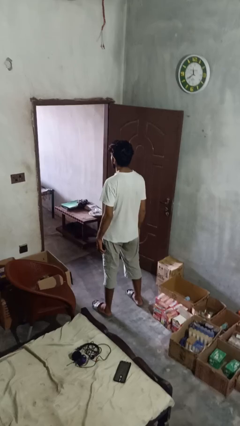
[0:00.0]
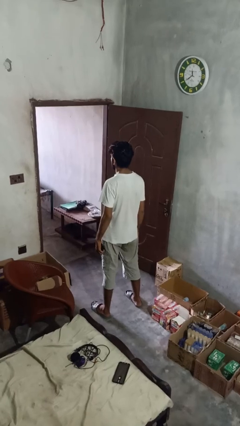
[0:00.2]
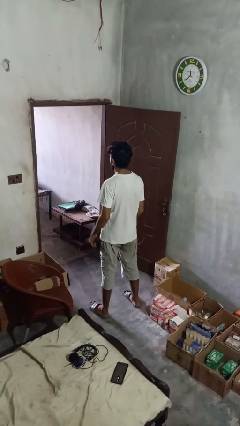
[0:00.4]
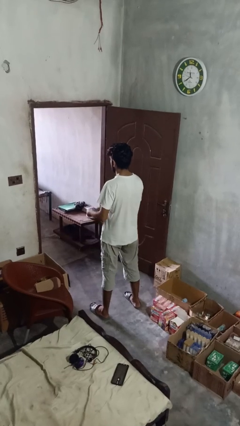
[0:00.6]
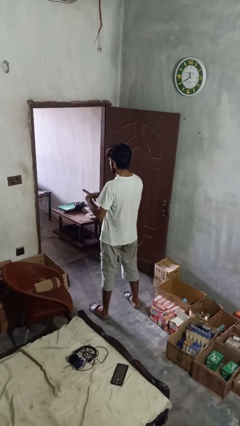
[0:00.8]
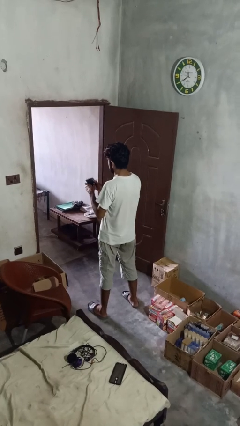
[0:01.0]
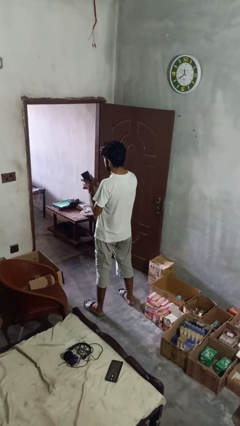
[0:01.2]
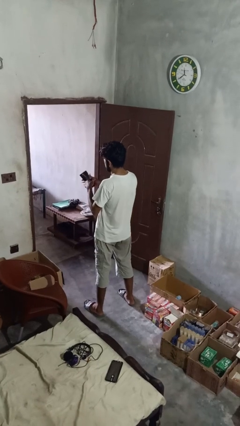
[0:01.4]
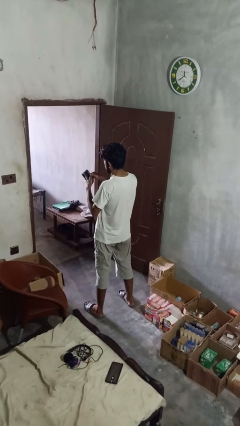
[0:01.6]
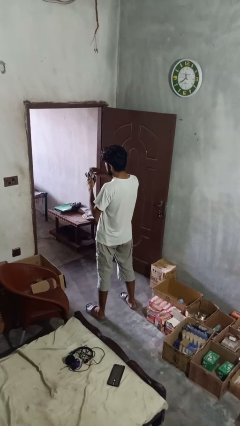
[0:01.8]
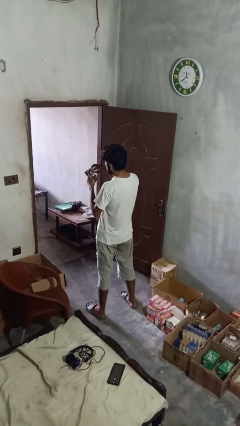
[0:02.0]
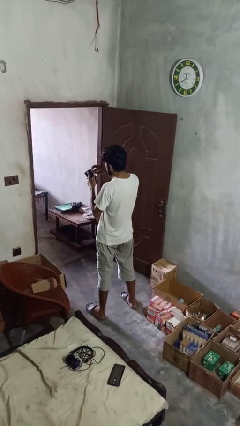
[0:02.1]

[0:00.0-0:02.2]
person searches in purse

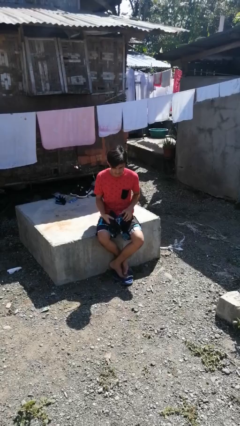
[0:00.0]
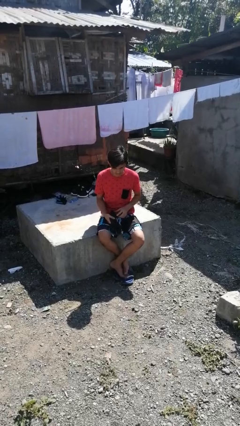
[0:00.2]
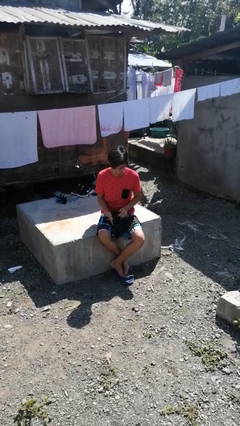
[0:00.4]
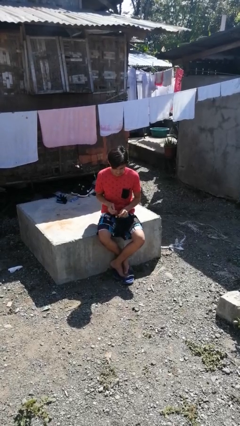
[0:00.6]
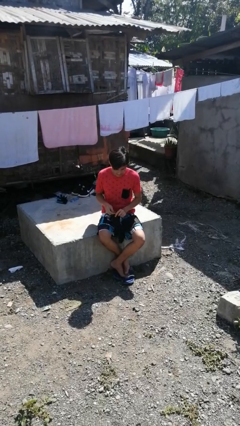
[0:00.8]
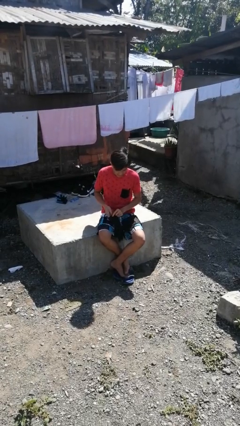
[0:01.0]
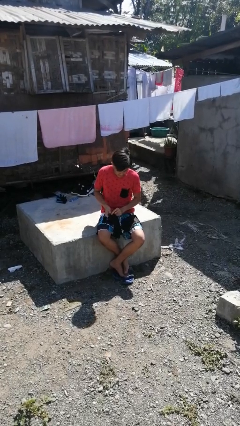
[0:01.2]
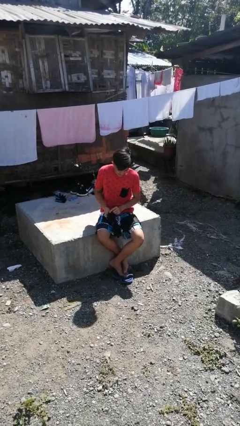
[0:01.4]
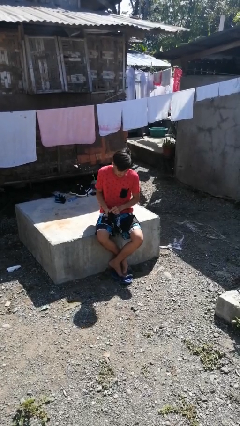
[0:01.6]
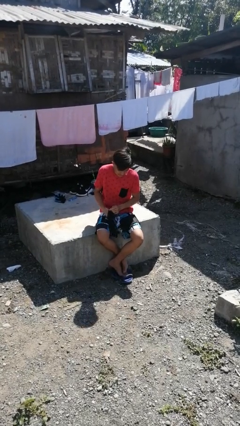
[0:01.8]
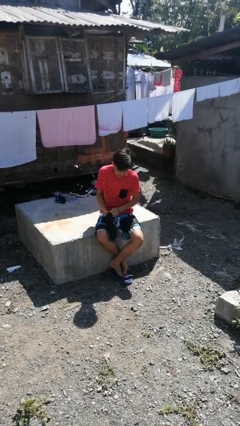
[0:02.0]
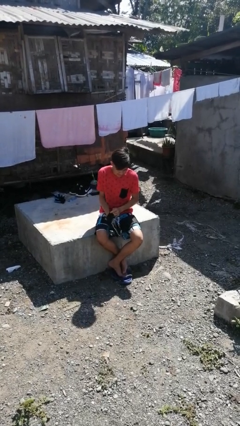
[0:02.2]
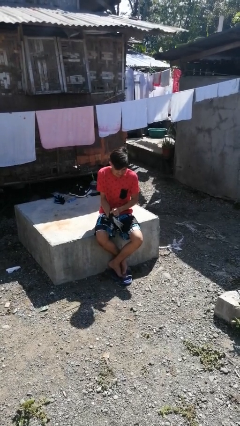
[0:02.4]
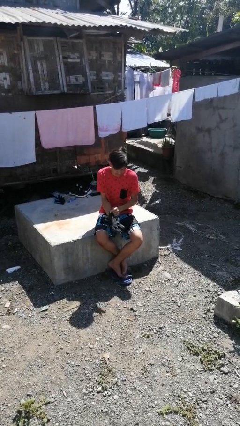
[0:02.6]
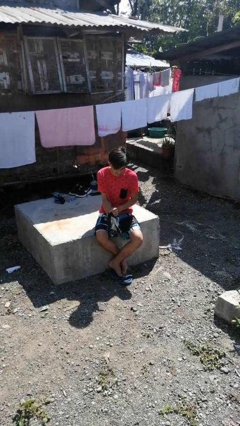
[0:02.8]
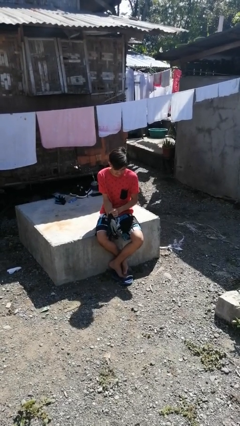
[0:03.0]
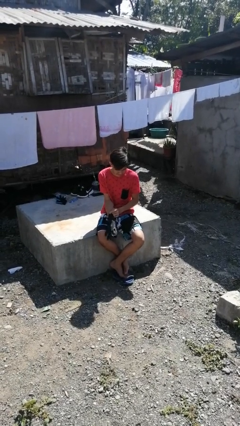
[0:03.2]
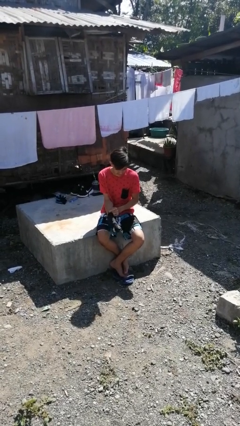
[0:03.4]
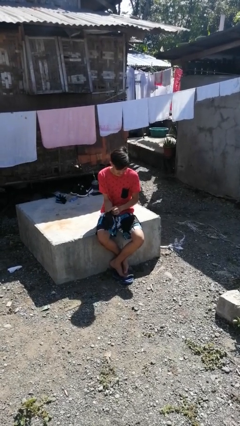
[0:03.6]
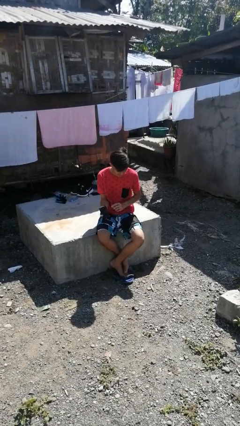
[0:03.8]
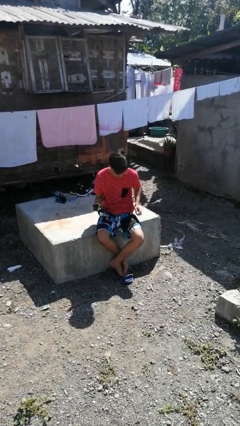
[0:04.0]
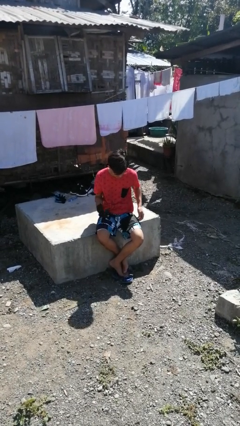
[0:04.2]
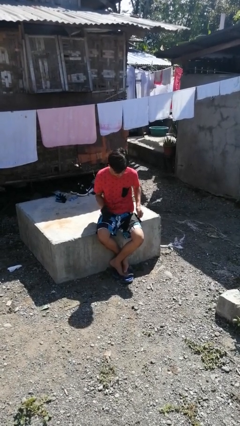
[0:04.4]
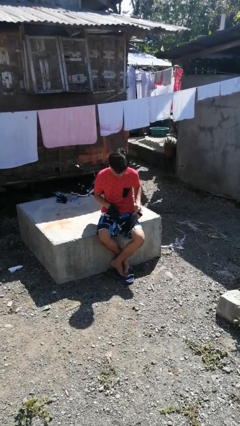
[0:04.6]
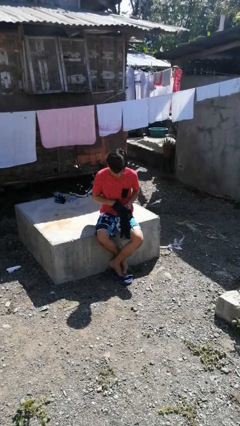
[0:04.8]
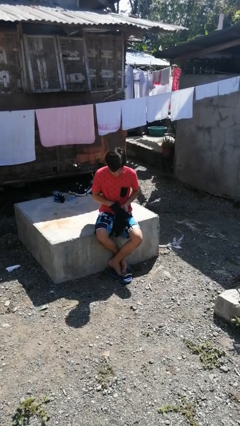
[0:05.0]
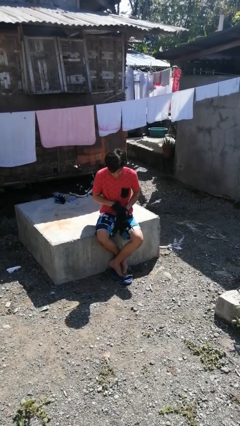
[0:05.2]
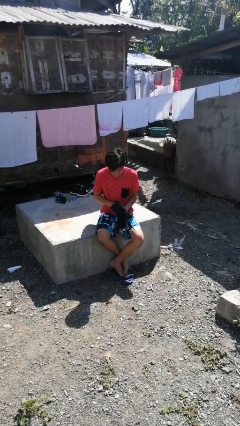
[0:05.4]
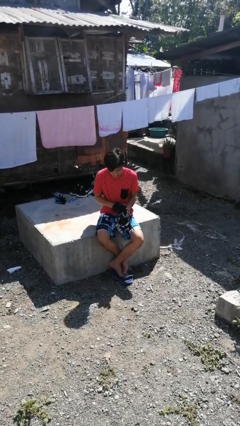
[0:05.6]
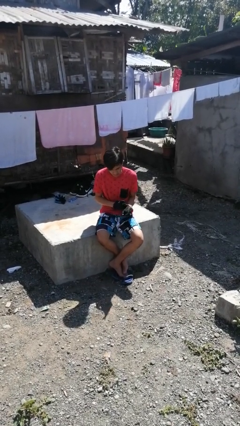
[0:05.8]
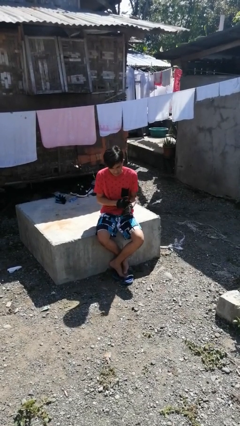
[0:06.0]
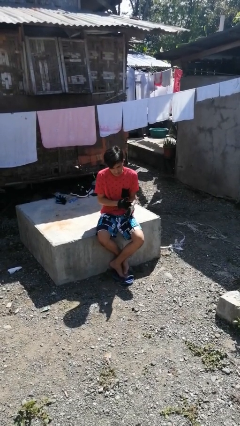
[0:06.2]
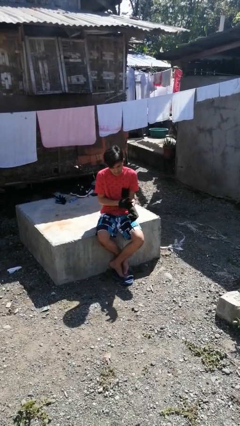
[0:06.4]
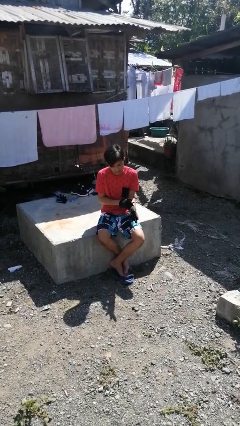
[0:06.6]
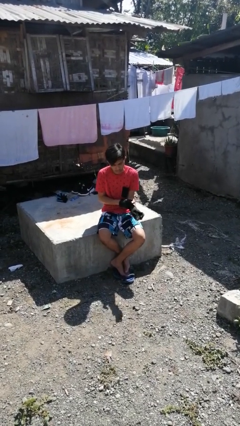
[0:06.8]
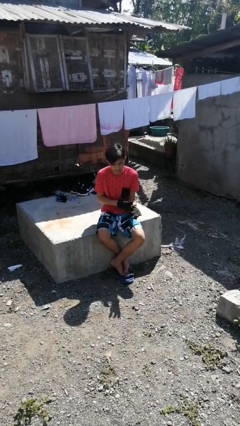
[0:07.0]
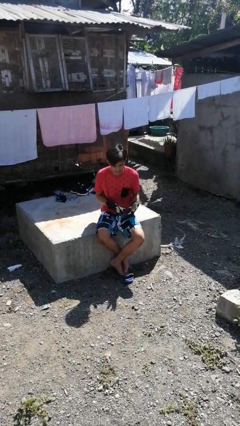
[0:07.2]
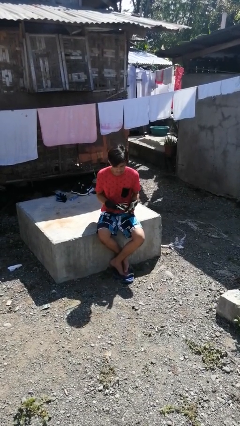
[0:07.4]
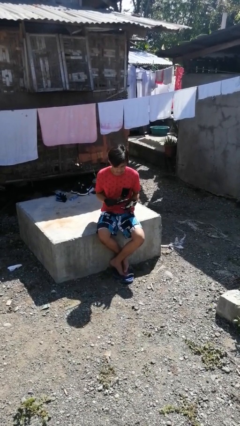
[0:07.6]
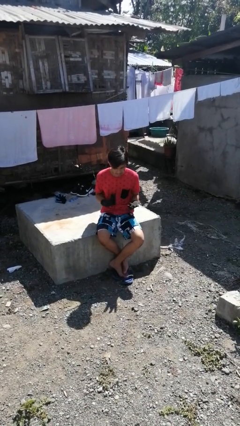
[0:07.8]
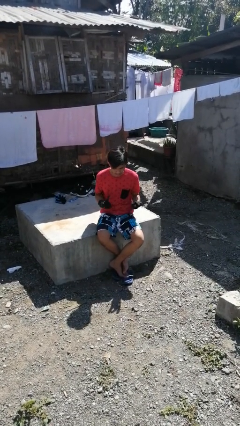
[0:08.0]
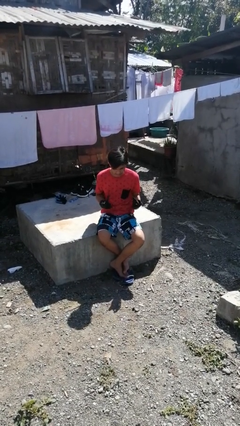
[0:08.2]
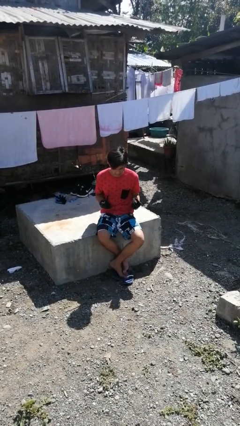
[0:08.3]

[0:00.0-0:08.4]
person puts on gloves

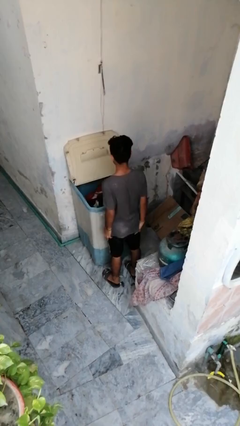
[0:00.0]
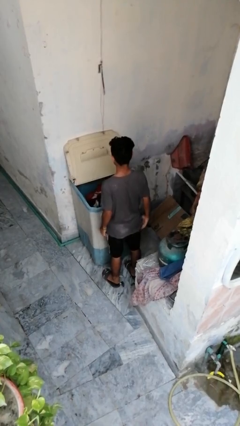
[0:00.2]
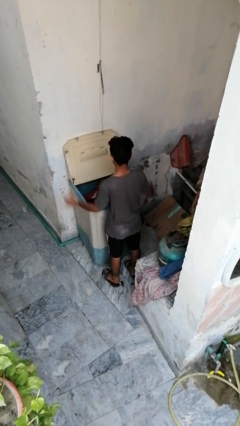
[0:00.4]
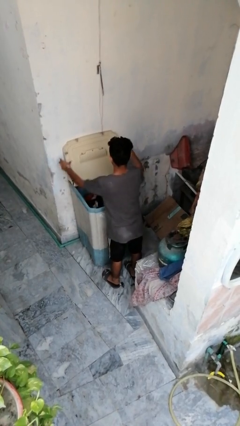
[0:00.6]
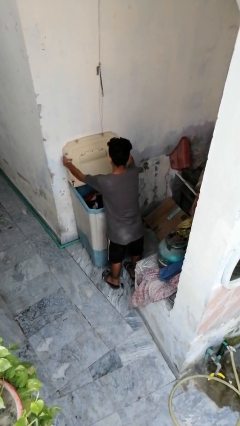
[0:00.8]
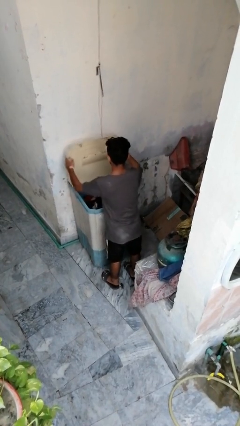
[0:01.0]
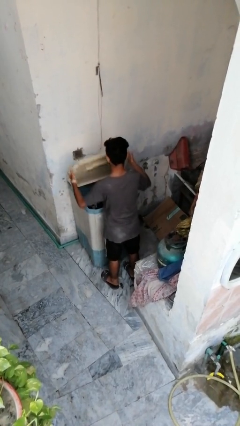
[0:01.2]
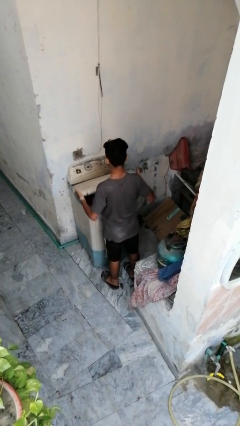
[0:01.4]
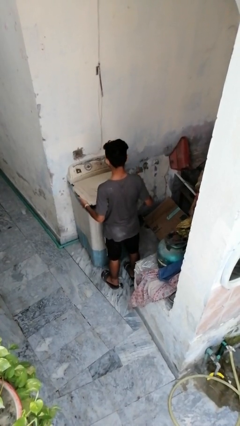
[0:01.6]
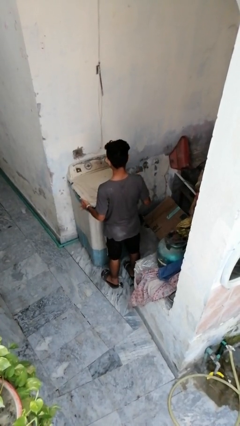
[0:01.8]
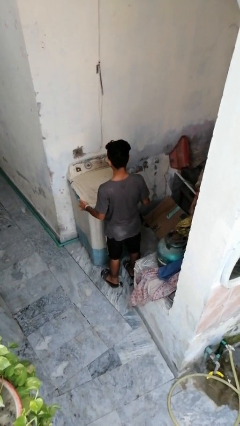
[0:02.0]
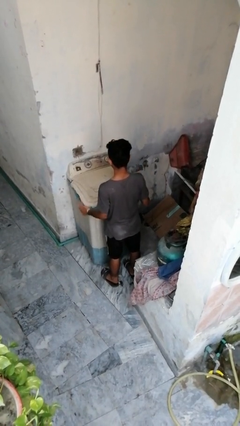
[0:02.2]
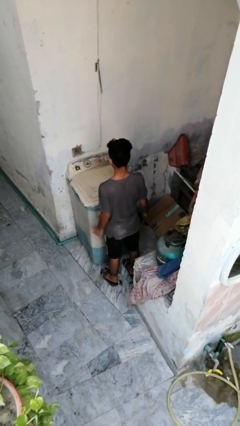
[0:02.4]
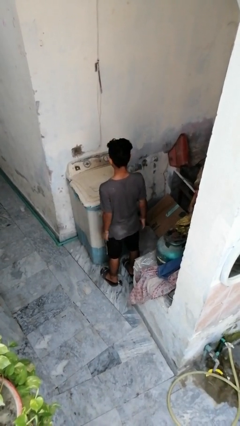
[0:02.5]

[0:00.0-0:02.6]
person closes clothes washer

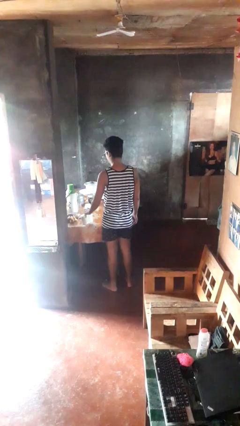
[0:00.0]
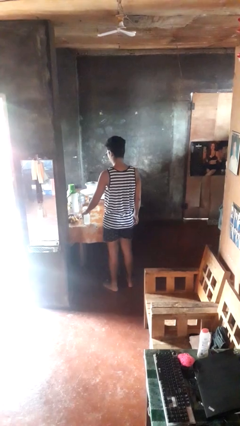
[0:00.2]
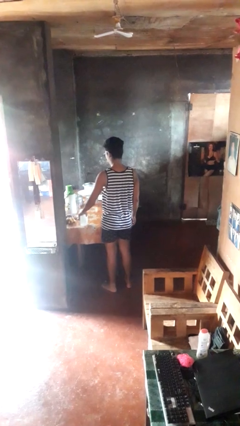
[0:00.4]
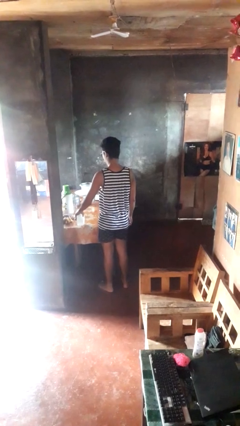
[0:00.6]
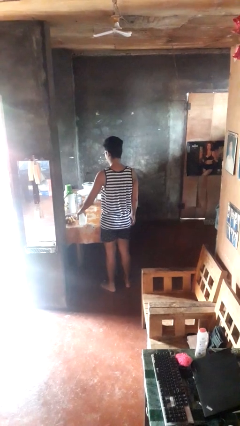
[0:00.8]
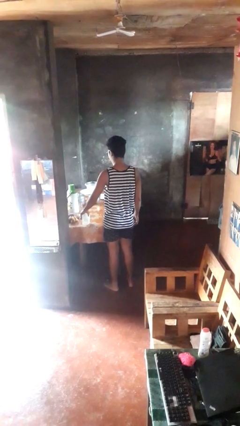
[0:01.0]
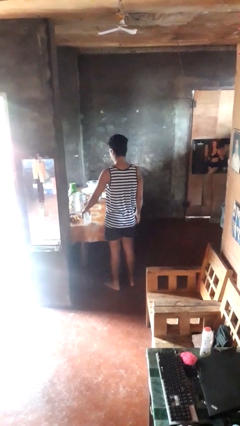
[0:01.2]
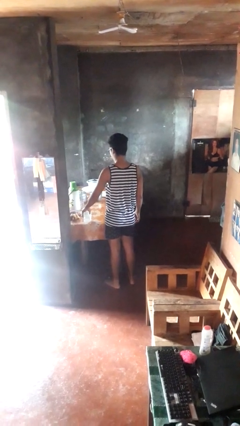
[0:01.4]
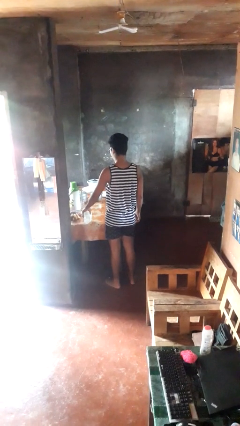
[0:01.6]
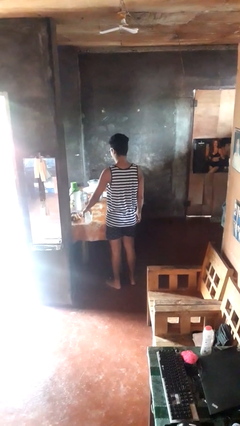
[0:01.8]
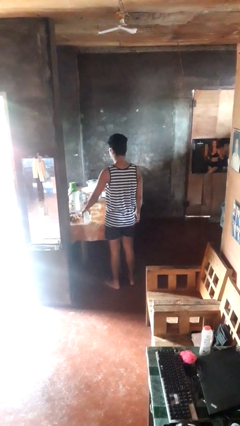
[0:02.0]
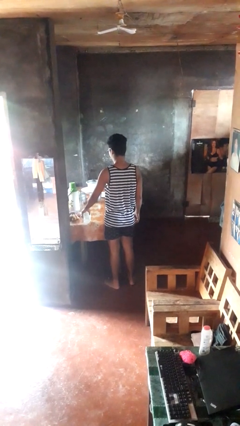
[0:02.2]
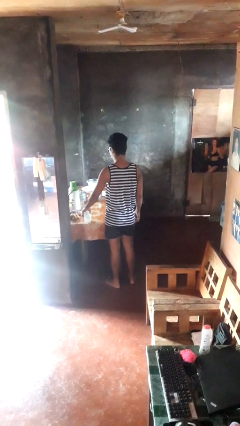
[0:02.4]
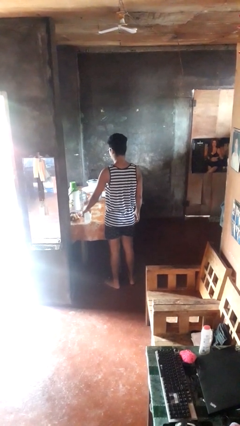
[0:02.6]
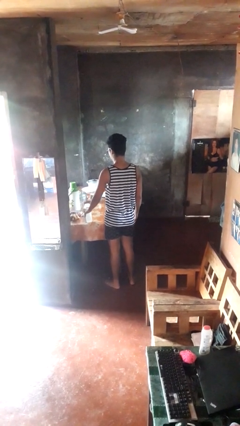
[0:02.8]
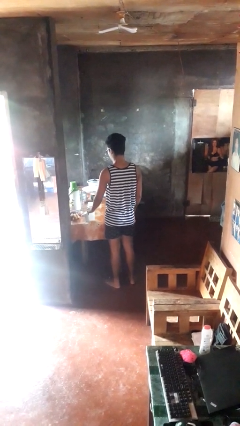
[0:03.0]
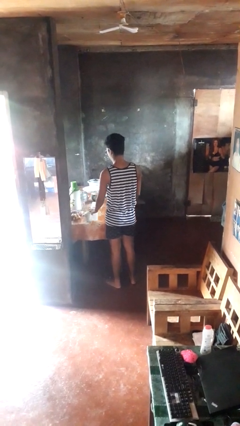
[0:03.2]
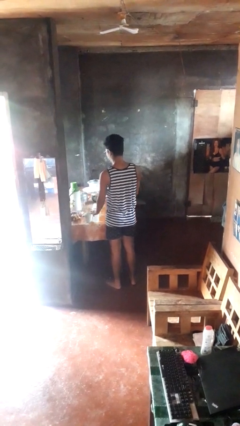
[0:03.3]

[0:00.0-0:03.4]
person pours liquid into cup

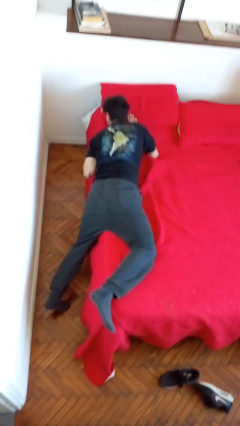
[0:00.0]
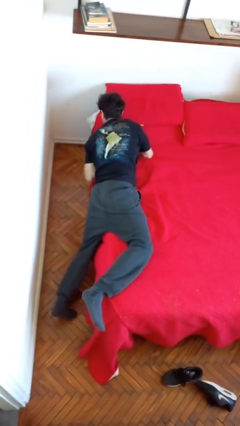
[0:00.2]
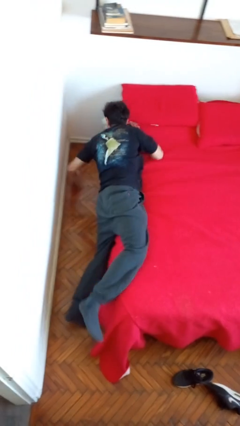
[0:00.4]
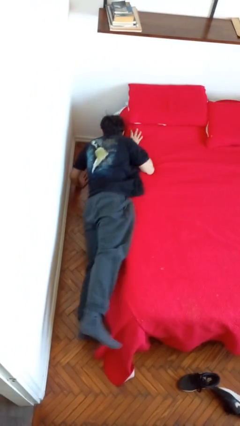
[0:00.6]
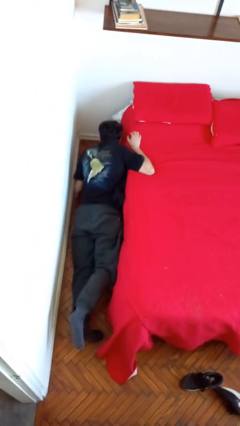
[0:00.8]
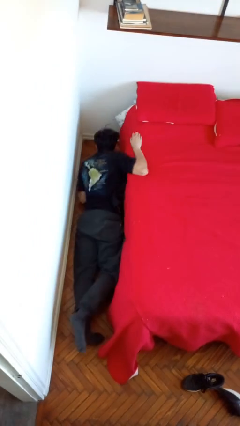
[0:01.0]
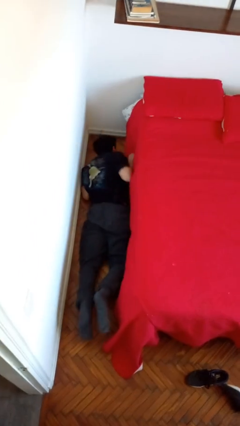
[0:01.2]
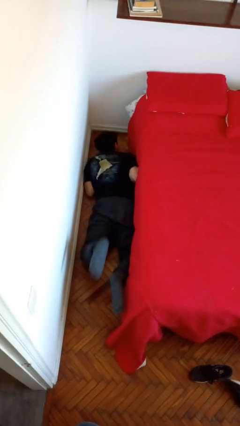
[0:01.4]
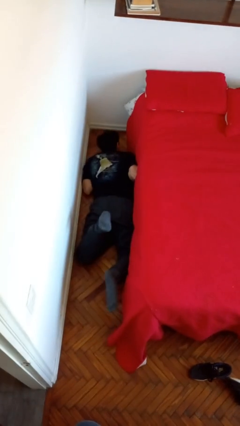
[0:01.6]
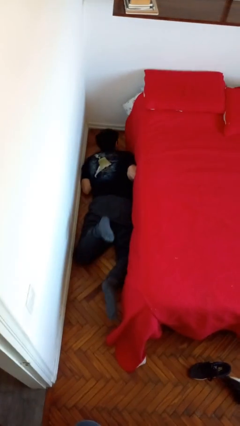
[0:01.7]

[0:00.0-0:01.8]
person falls from bed
